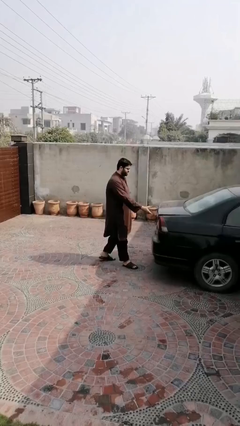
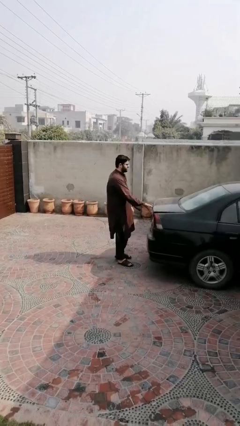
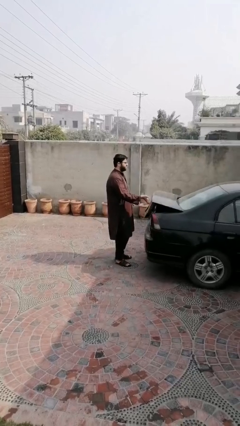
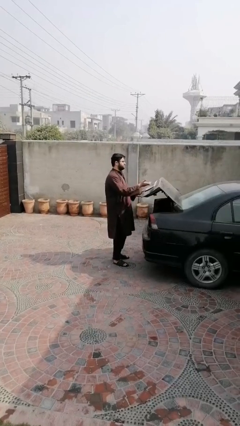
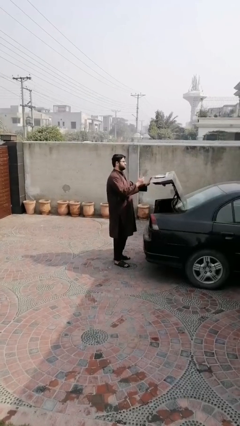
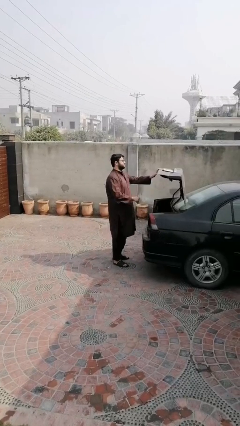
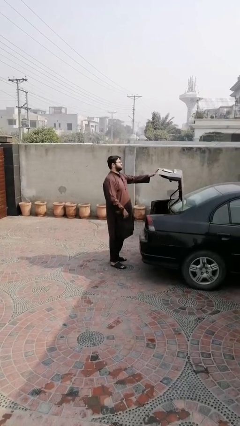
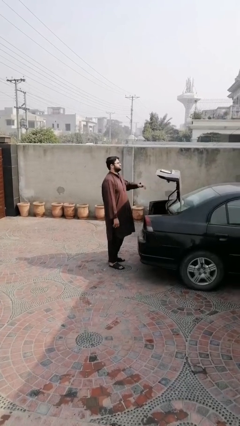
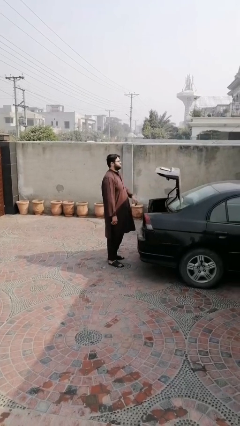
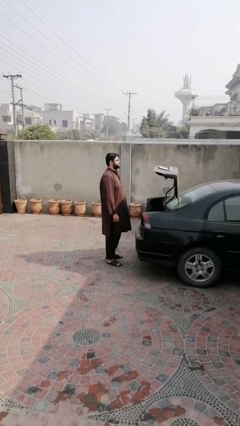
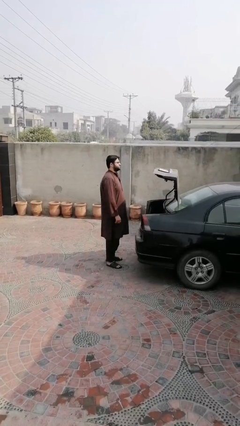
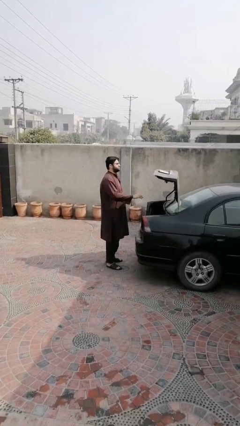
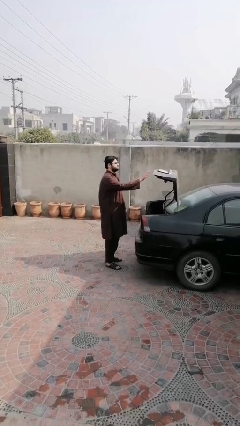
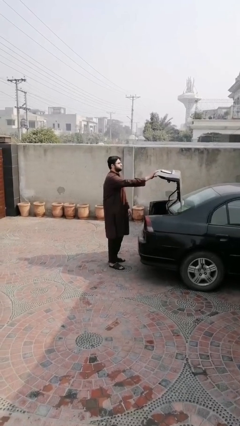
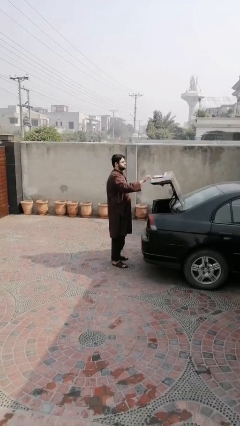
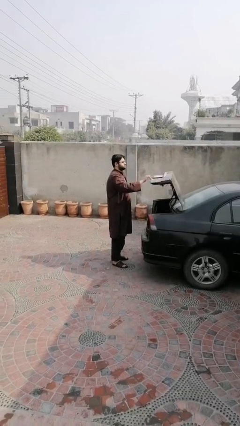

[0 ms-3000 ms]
person opens car trunk

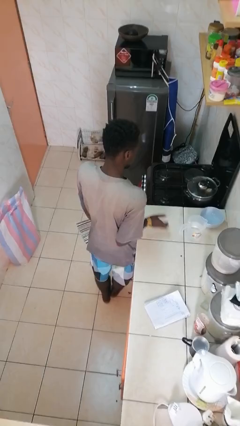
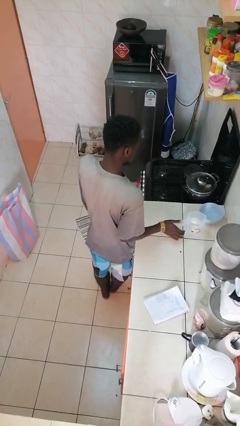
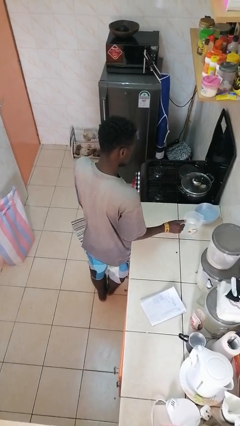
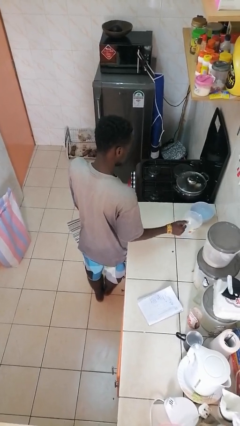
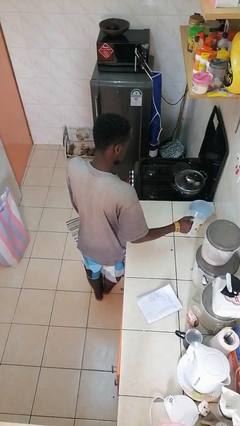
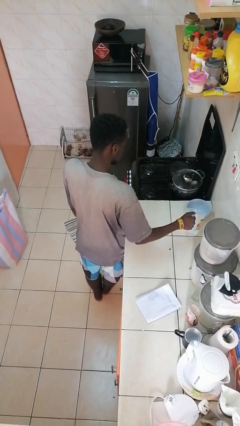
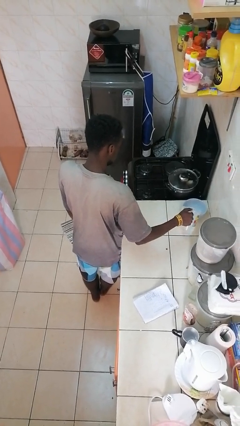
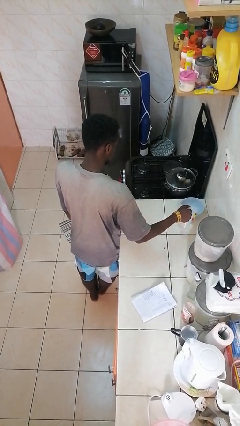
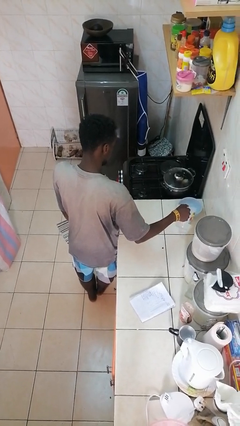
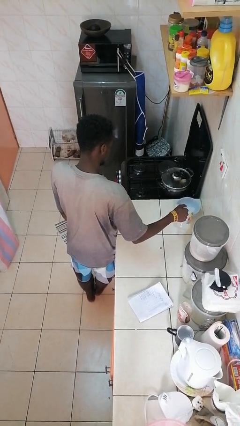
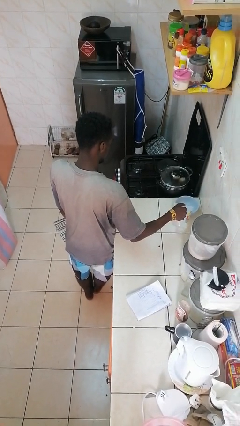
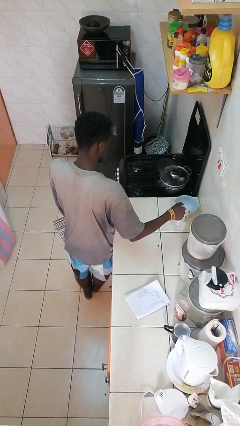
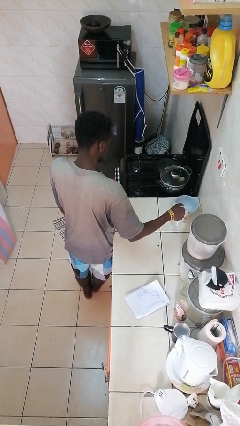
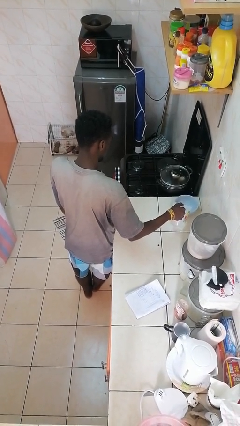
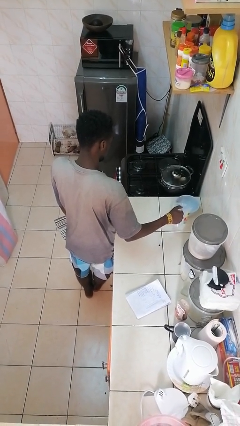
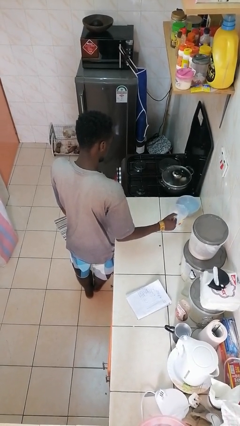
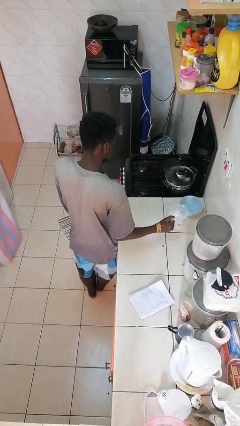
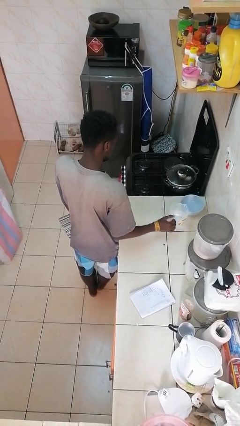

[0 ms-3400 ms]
person pours into bowl

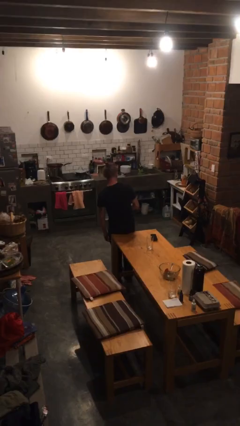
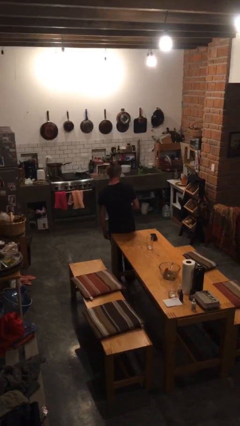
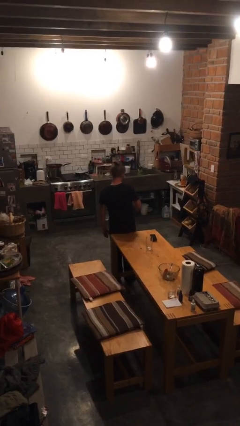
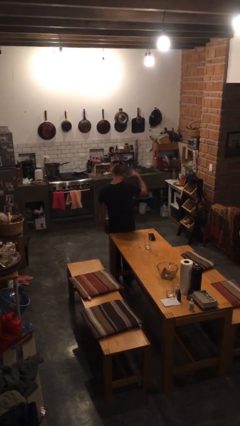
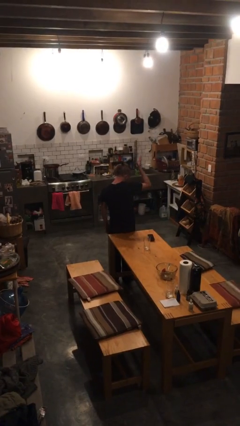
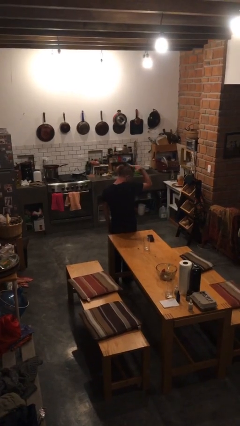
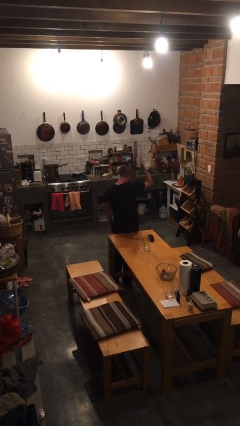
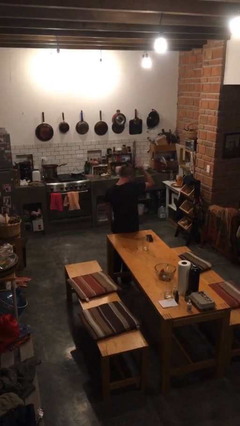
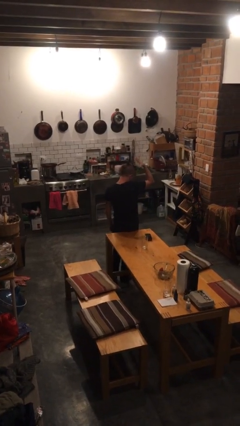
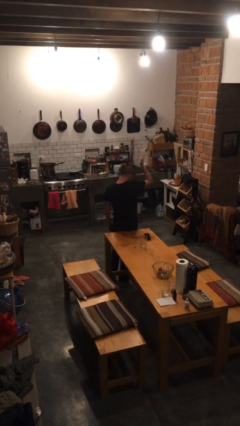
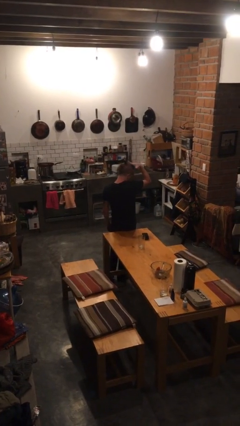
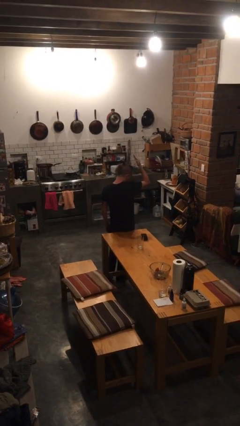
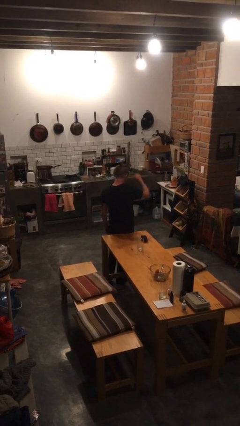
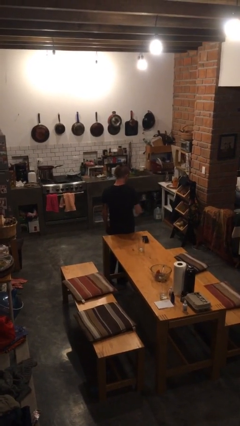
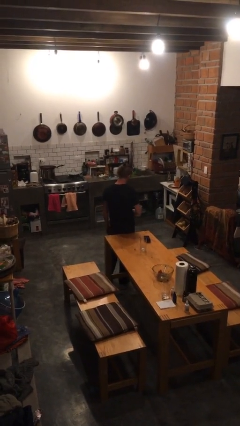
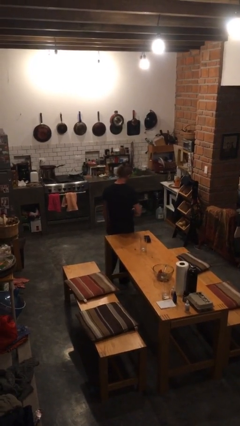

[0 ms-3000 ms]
person pats head

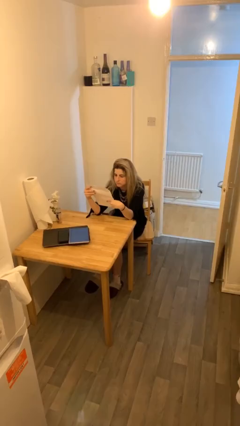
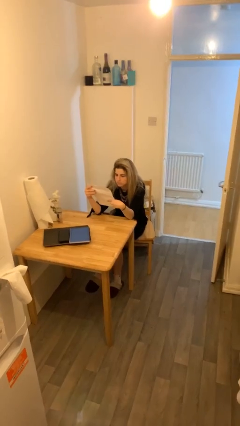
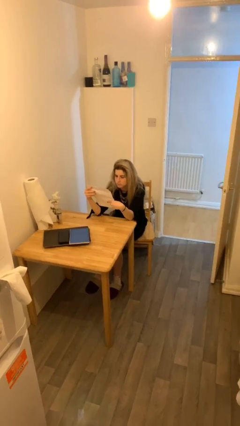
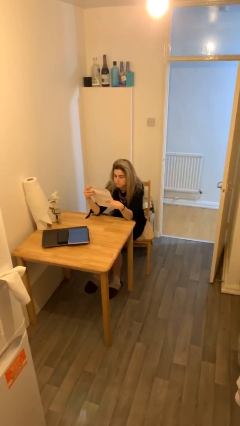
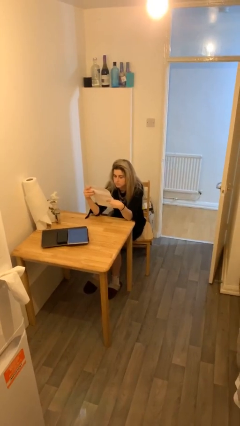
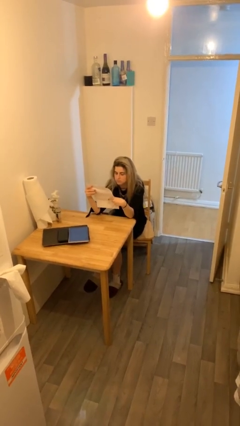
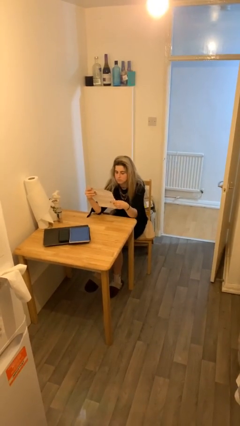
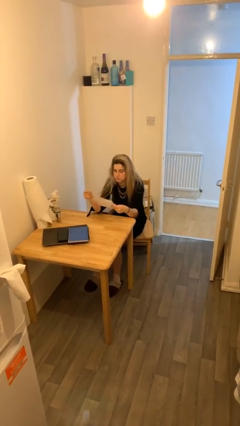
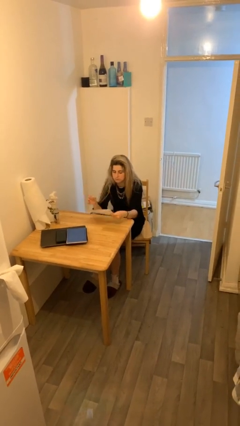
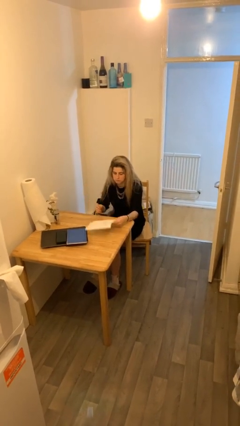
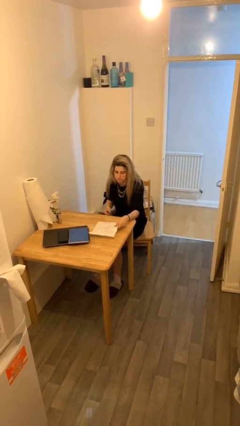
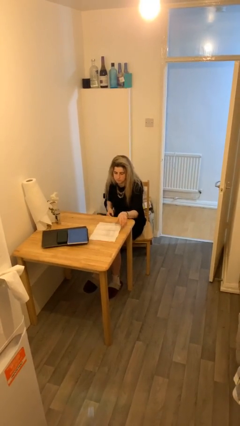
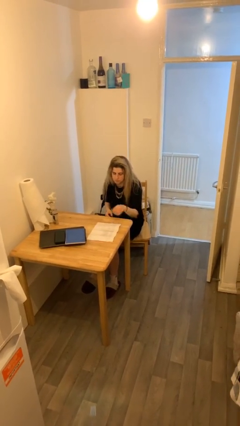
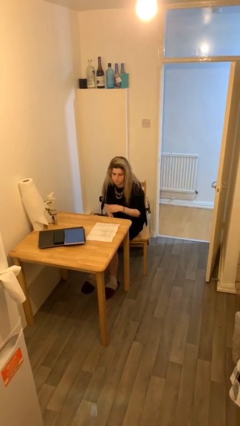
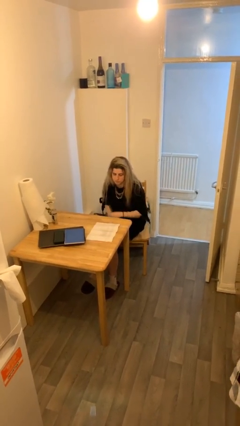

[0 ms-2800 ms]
person puts down object on table

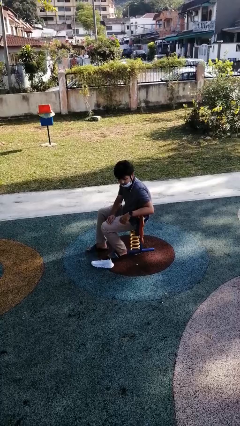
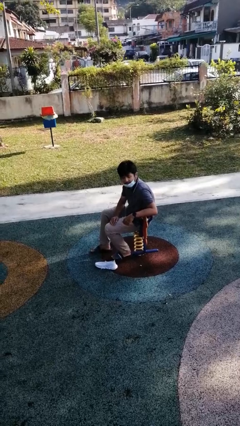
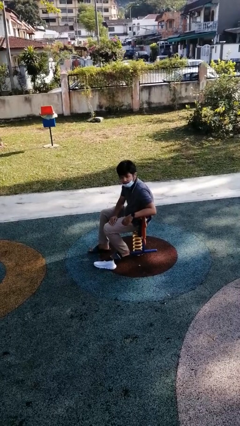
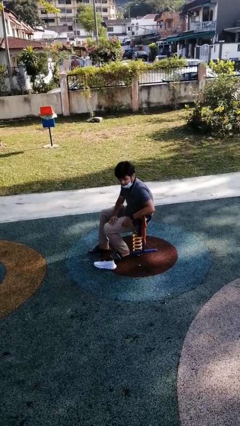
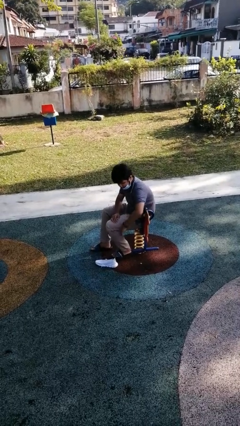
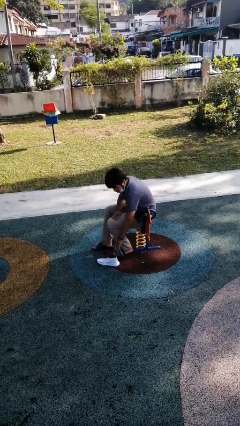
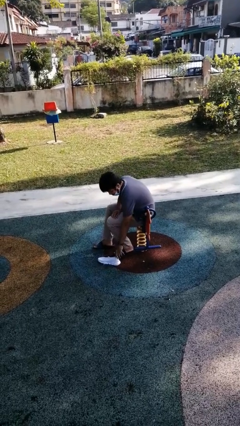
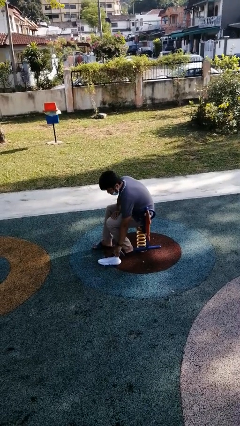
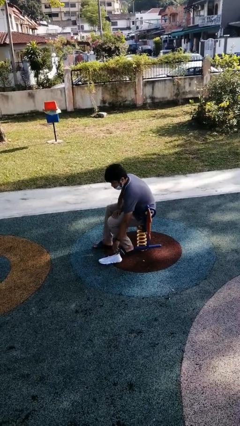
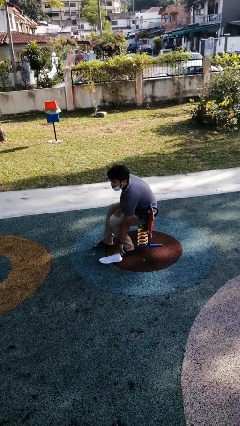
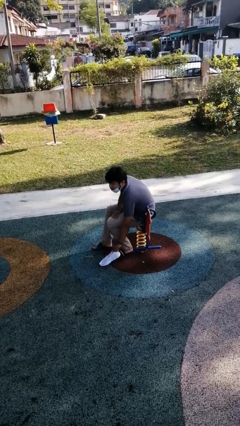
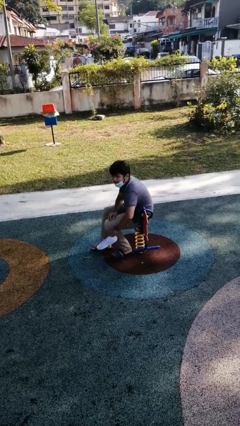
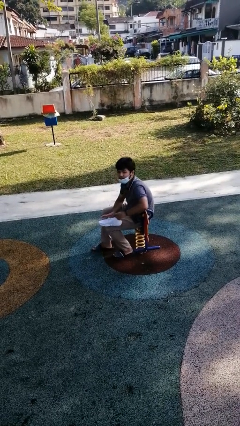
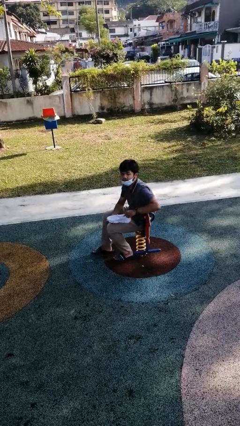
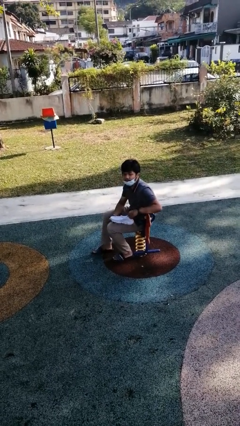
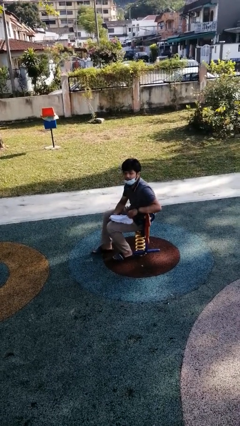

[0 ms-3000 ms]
person picks up object from floor

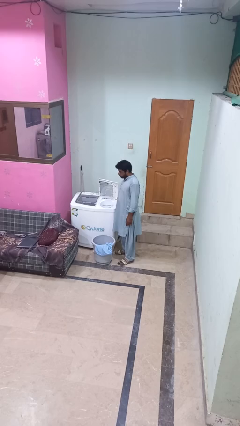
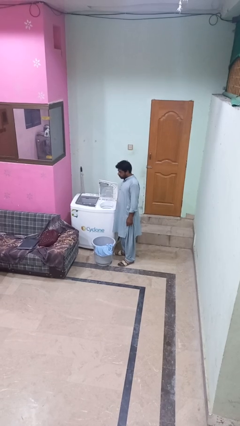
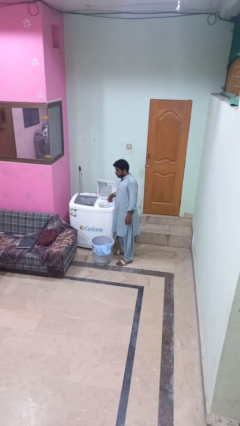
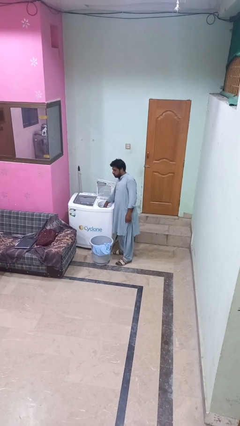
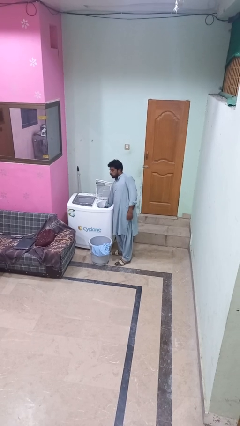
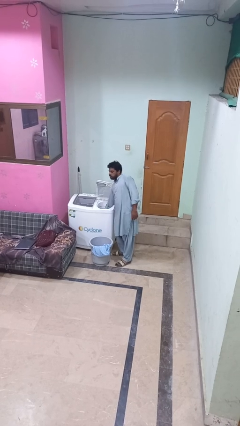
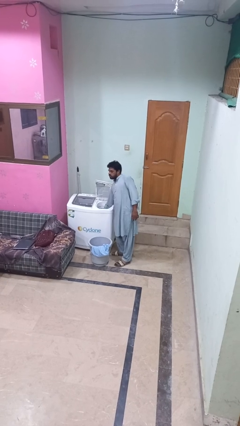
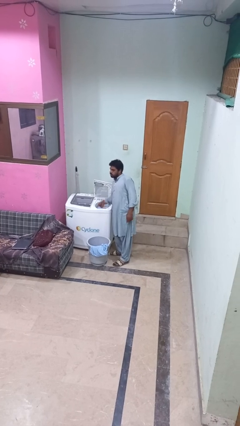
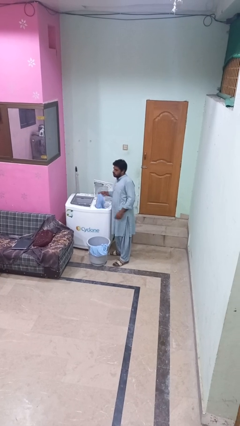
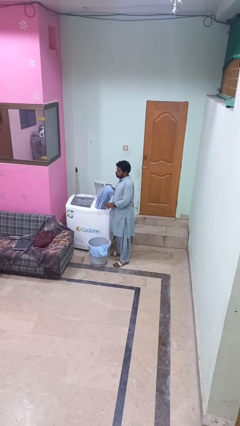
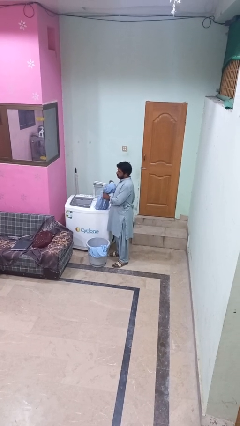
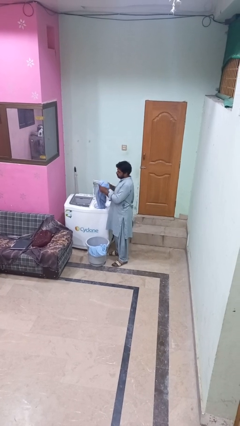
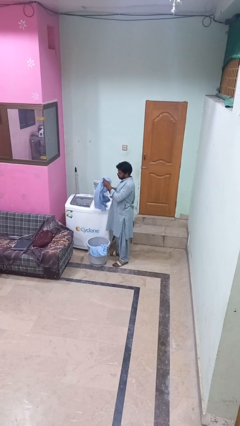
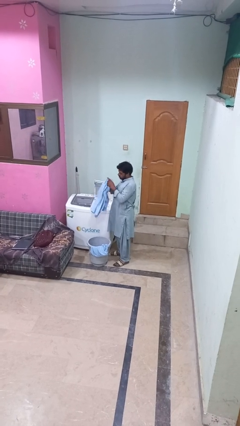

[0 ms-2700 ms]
person unloads dryer
